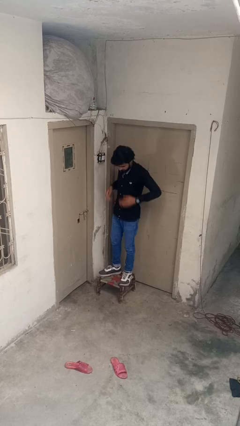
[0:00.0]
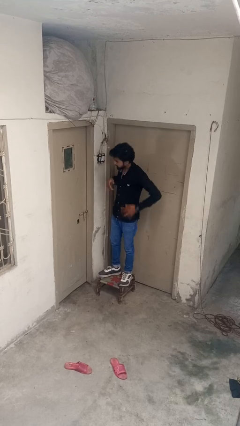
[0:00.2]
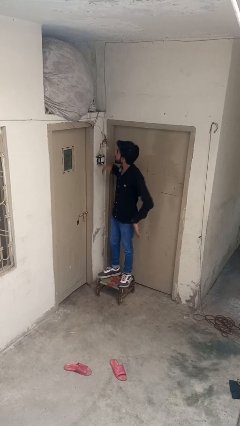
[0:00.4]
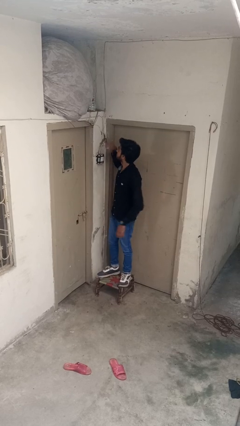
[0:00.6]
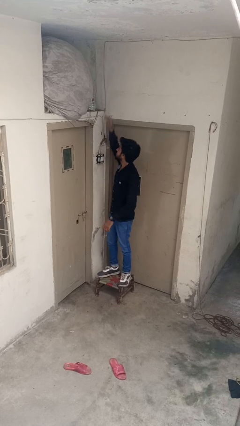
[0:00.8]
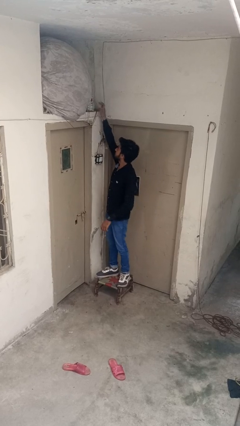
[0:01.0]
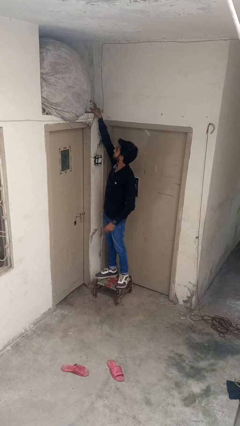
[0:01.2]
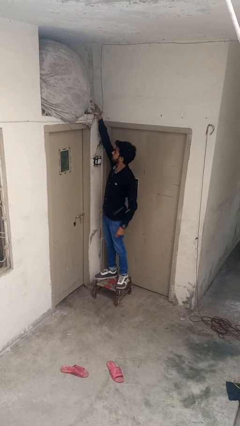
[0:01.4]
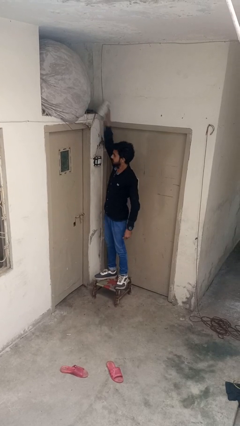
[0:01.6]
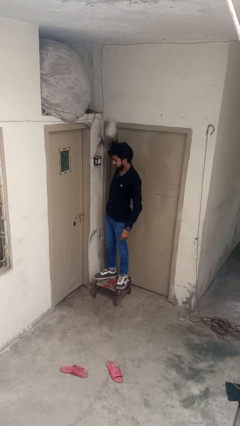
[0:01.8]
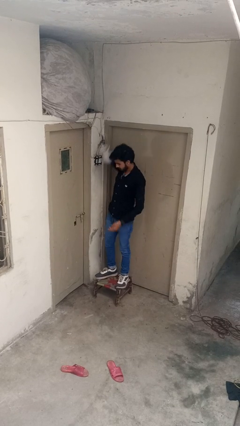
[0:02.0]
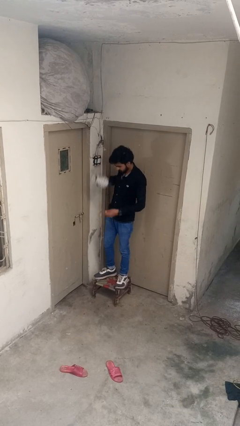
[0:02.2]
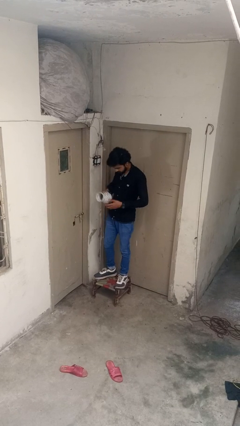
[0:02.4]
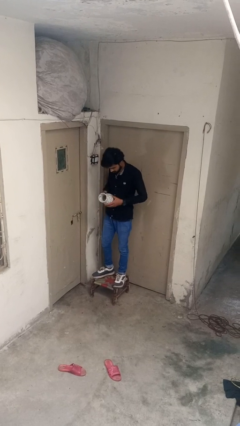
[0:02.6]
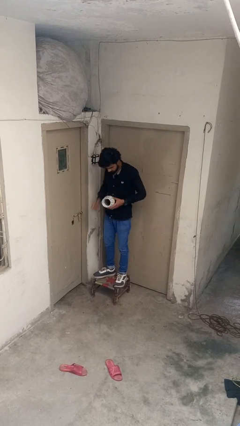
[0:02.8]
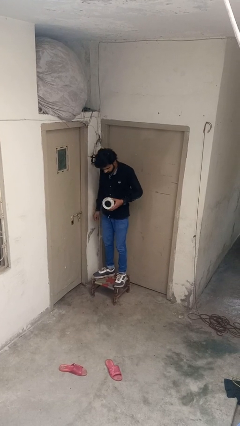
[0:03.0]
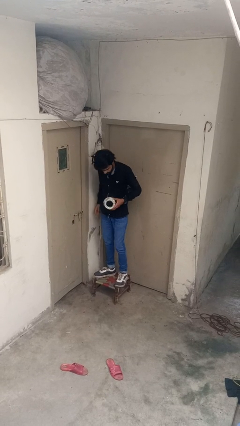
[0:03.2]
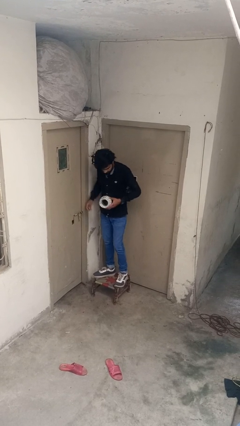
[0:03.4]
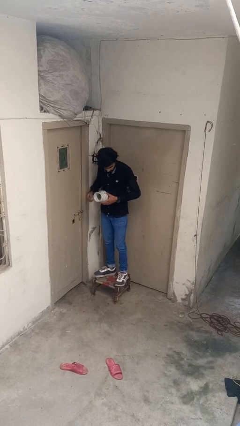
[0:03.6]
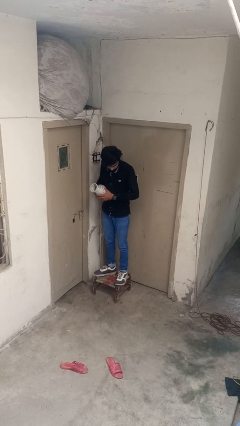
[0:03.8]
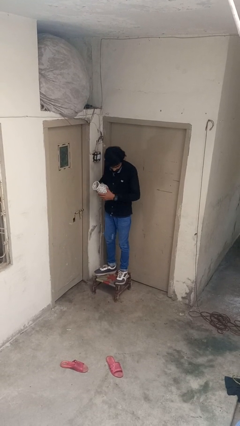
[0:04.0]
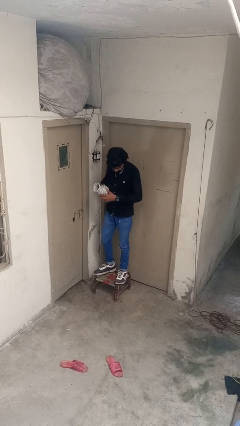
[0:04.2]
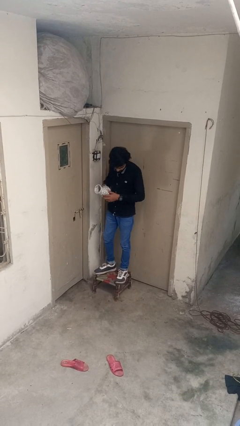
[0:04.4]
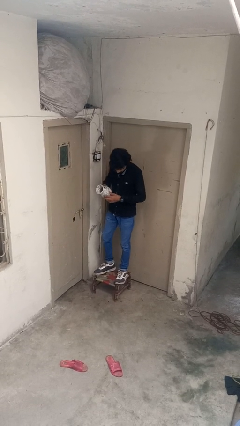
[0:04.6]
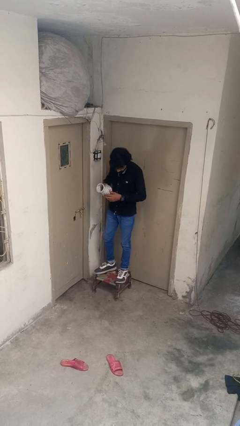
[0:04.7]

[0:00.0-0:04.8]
person picks up object from shelf

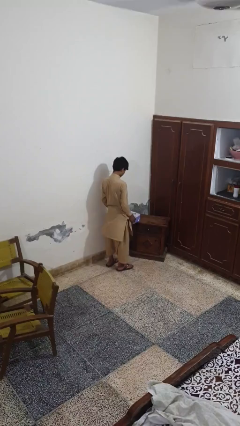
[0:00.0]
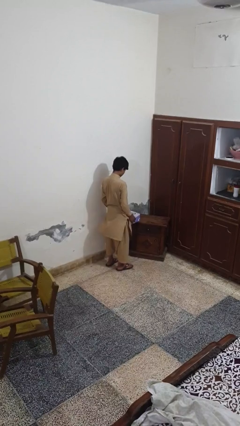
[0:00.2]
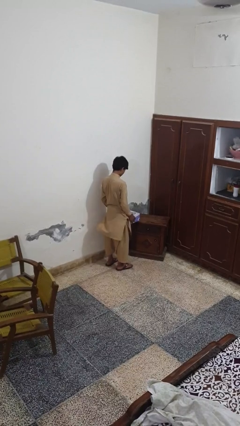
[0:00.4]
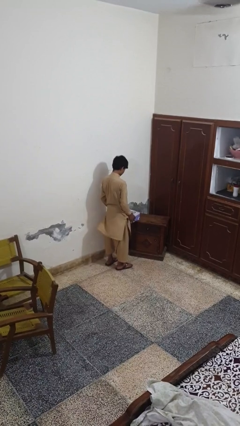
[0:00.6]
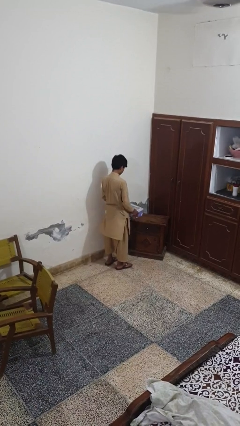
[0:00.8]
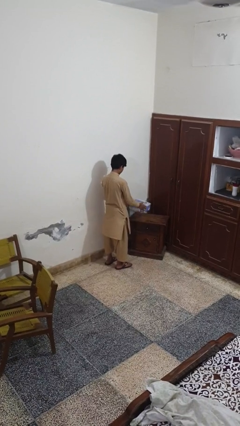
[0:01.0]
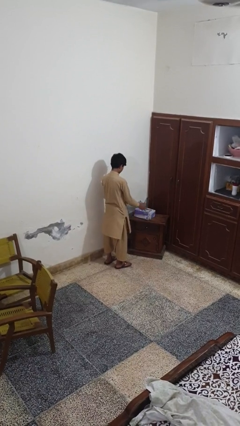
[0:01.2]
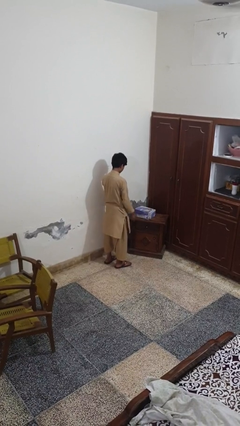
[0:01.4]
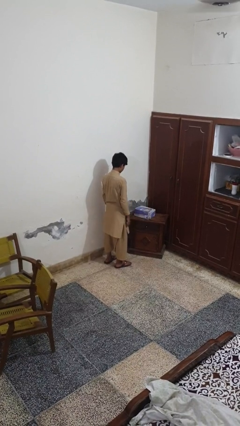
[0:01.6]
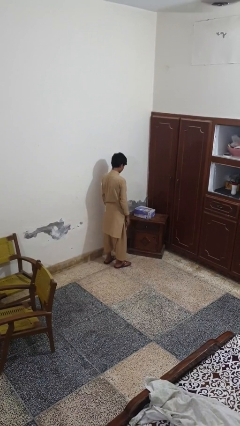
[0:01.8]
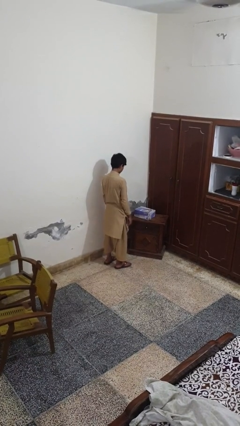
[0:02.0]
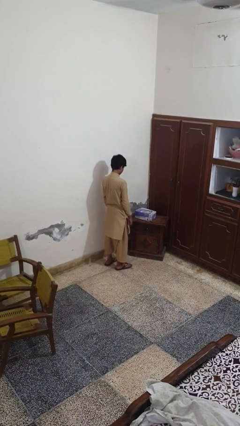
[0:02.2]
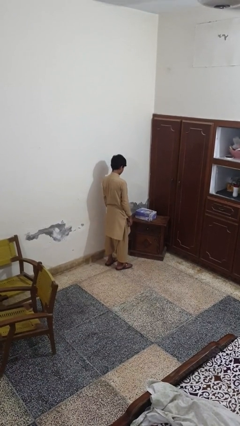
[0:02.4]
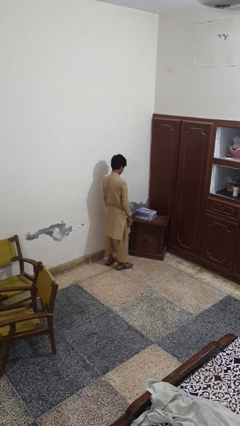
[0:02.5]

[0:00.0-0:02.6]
person throws object on table

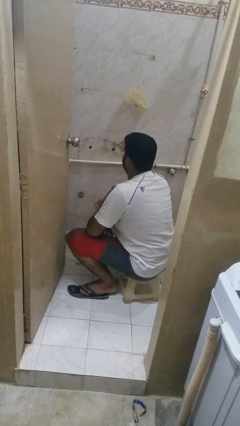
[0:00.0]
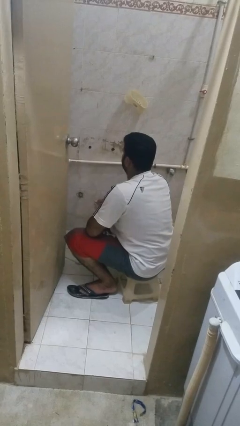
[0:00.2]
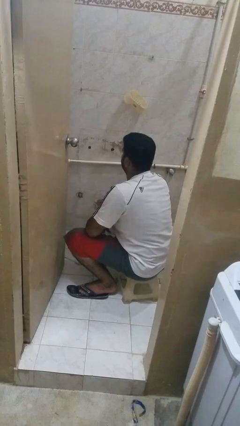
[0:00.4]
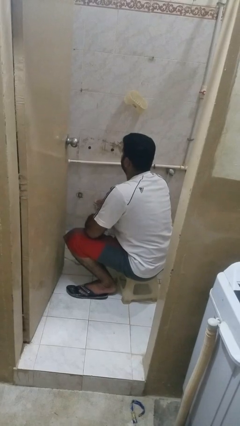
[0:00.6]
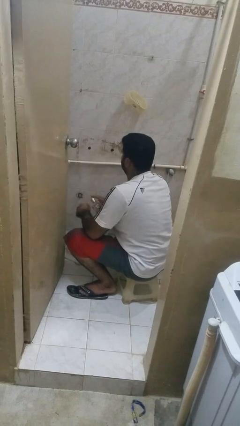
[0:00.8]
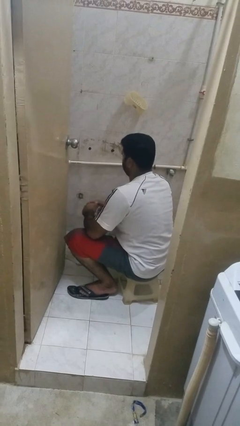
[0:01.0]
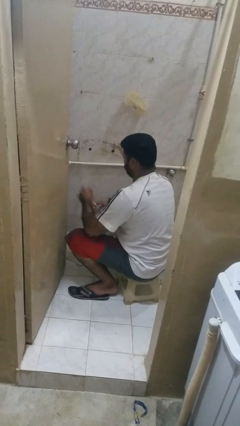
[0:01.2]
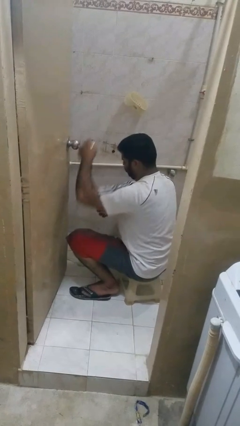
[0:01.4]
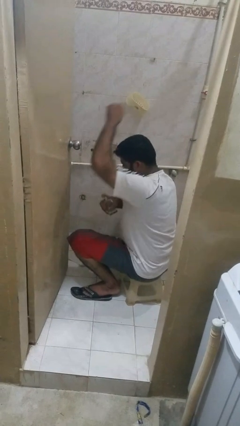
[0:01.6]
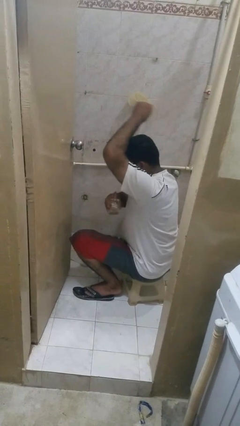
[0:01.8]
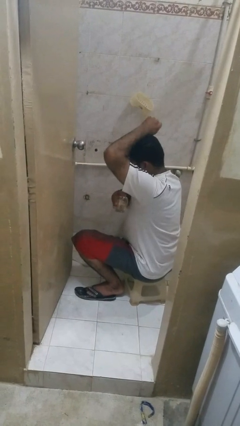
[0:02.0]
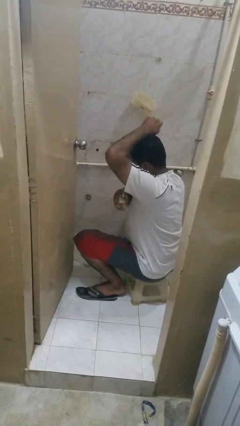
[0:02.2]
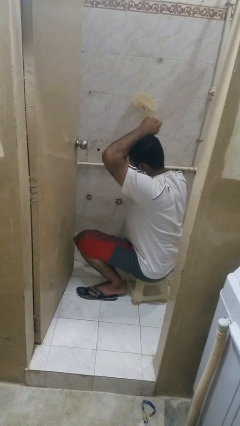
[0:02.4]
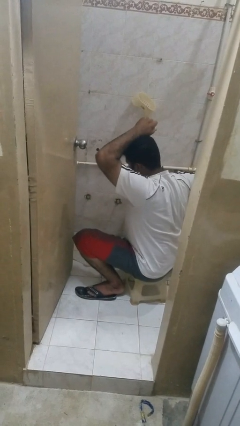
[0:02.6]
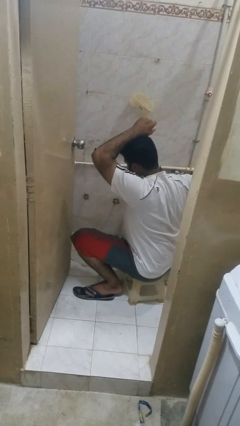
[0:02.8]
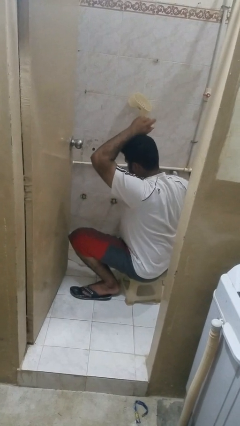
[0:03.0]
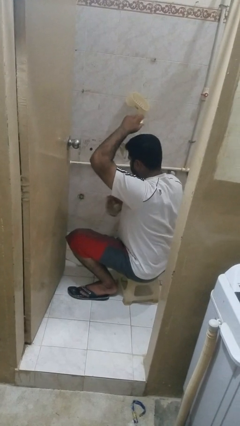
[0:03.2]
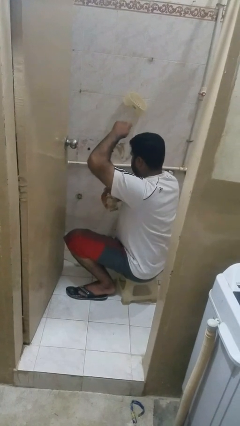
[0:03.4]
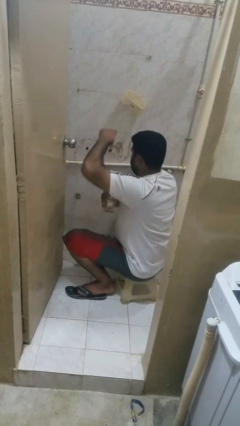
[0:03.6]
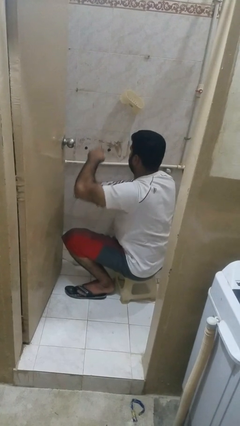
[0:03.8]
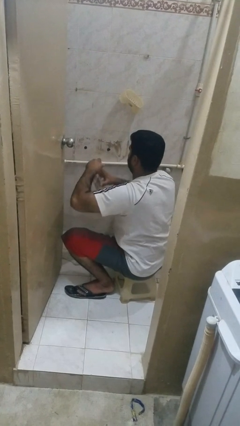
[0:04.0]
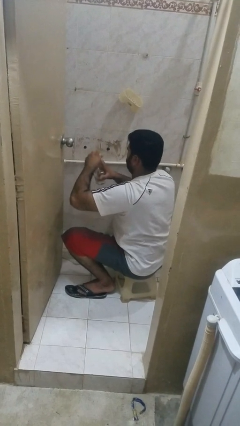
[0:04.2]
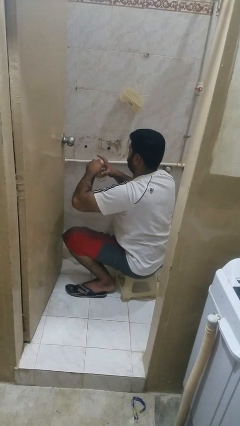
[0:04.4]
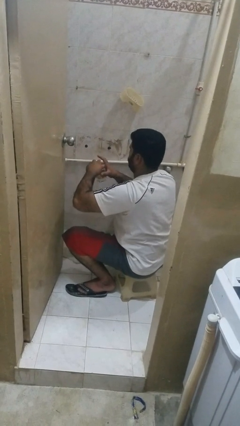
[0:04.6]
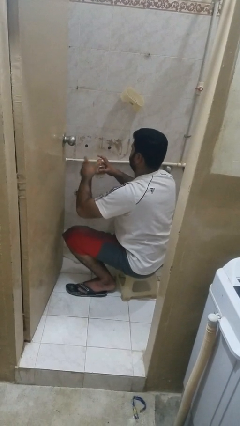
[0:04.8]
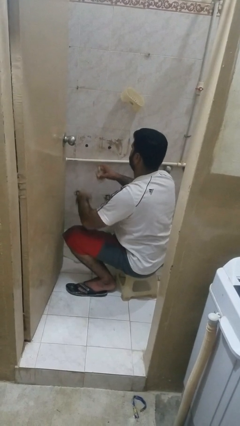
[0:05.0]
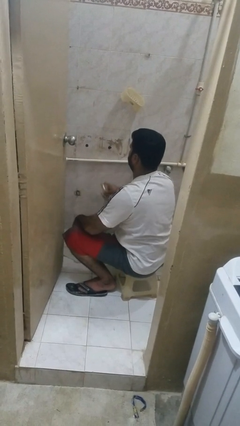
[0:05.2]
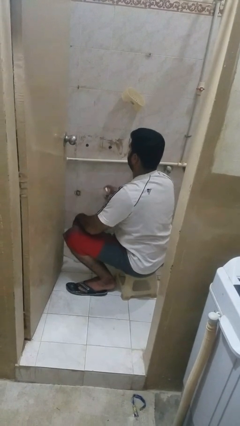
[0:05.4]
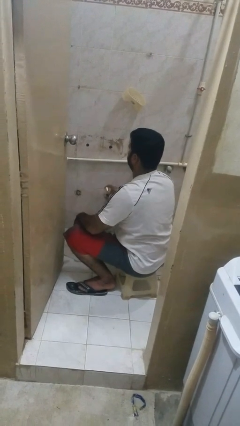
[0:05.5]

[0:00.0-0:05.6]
person applies deodorant

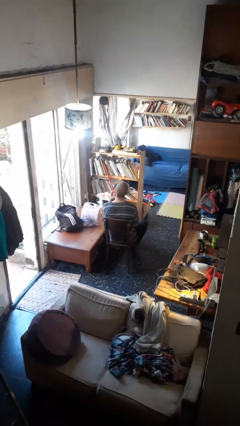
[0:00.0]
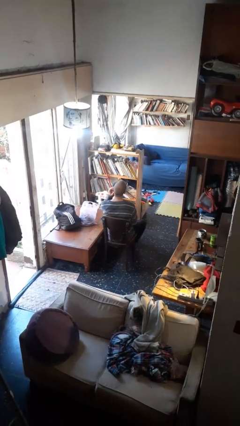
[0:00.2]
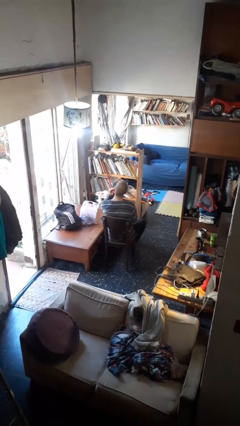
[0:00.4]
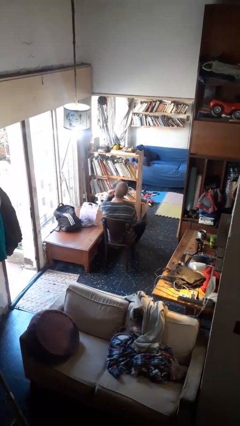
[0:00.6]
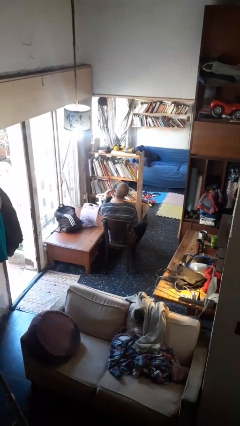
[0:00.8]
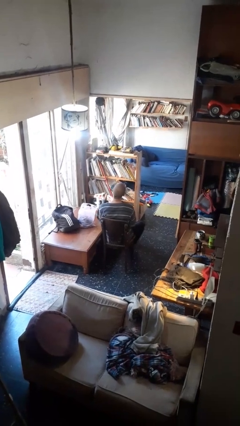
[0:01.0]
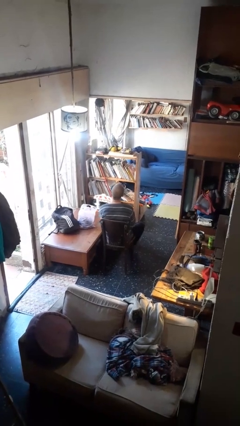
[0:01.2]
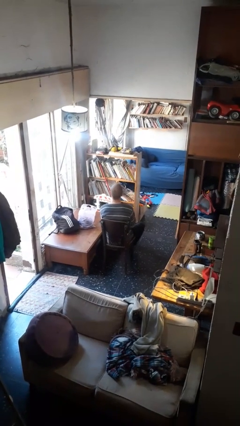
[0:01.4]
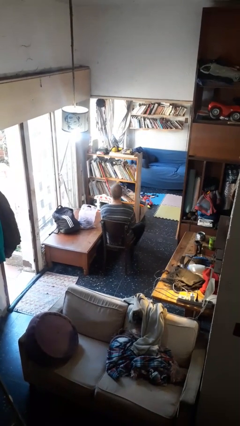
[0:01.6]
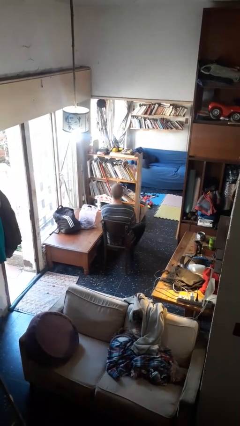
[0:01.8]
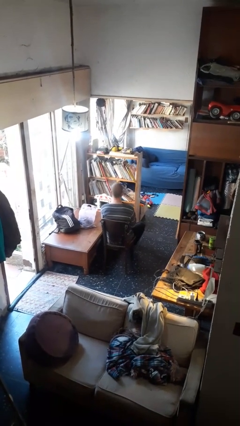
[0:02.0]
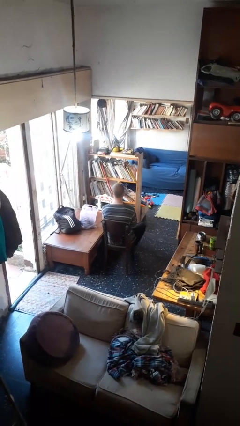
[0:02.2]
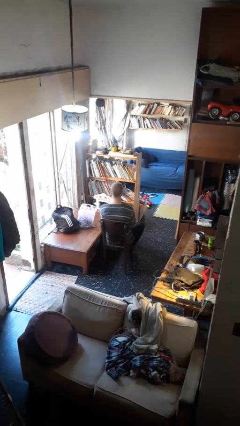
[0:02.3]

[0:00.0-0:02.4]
person takes off earrings

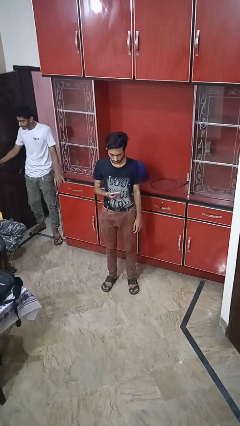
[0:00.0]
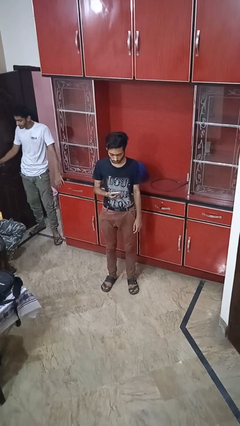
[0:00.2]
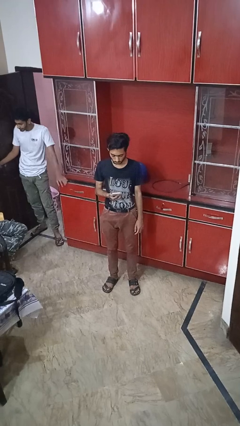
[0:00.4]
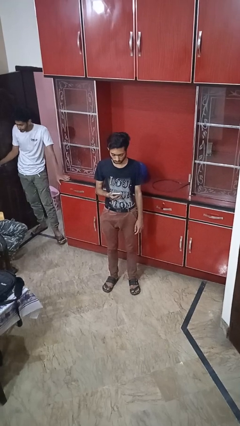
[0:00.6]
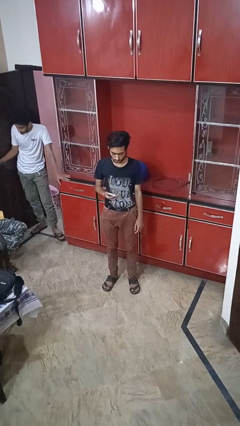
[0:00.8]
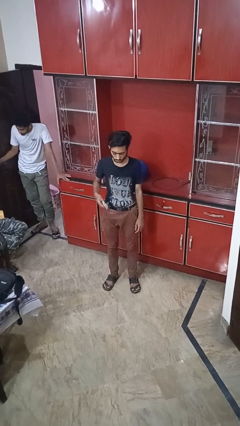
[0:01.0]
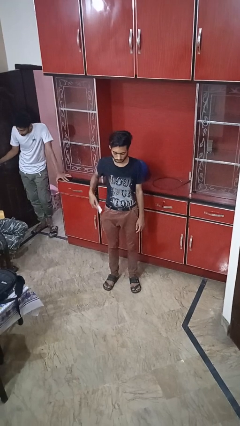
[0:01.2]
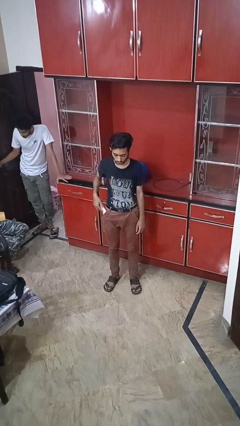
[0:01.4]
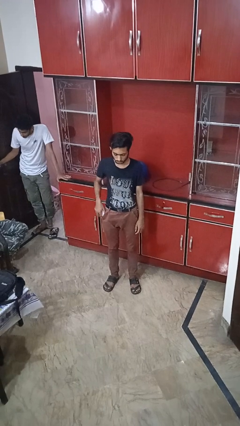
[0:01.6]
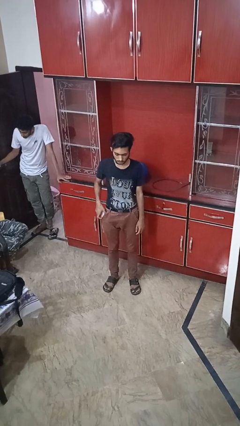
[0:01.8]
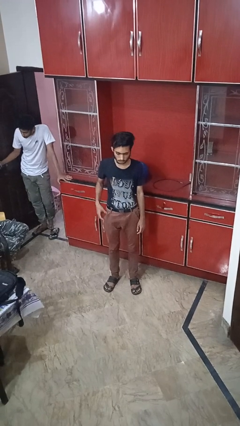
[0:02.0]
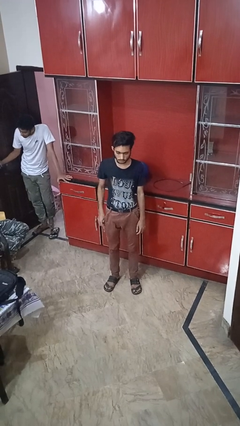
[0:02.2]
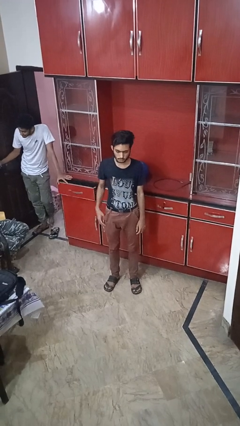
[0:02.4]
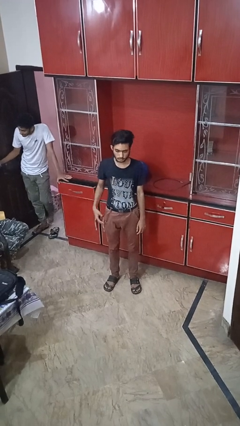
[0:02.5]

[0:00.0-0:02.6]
person puts phone into pocket
